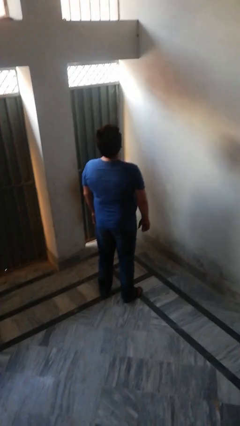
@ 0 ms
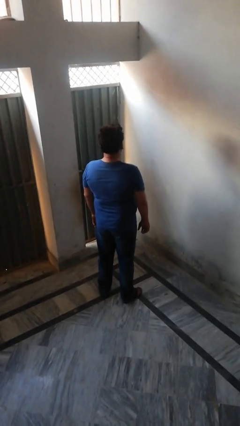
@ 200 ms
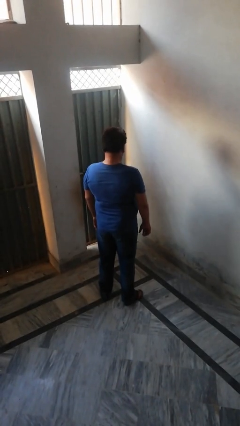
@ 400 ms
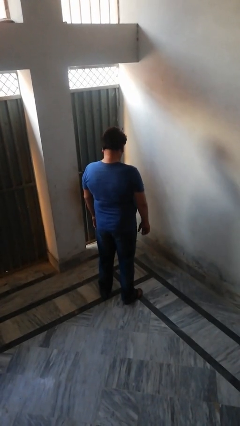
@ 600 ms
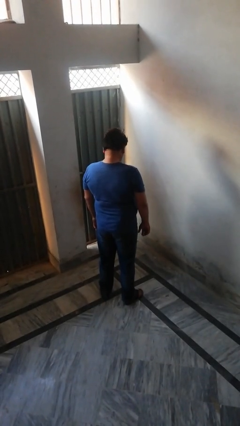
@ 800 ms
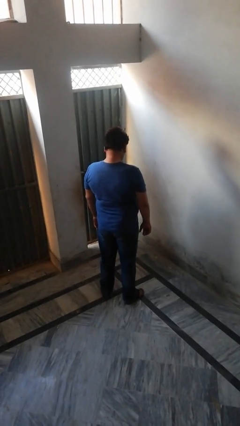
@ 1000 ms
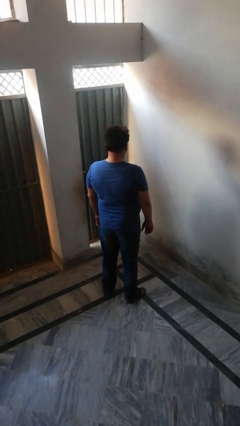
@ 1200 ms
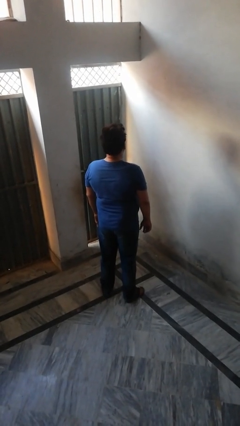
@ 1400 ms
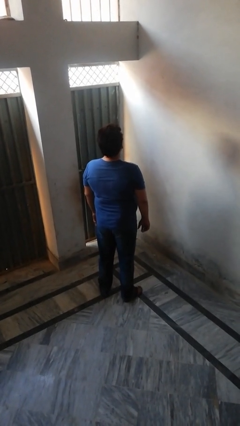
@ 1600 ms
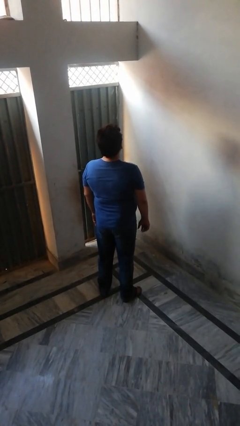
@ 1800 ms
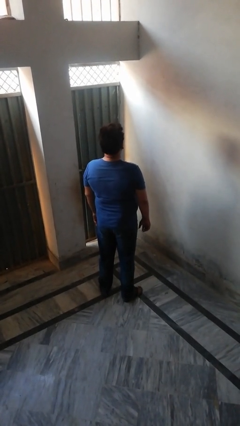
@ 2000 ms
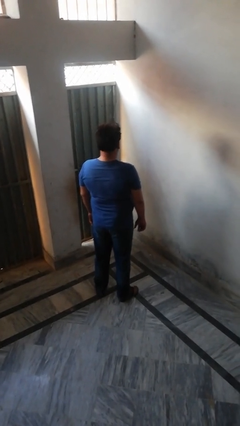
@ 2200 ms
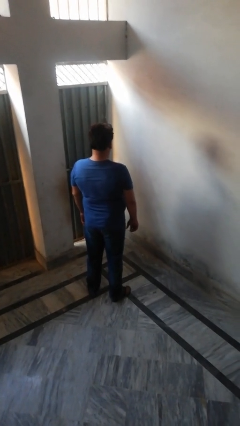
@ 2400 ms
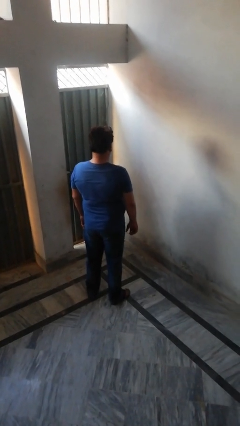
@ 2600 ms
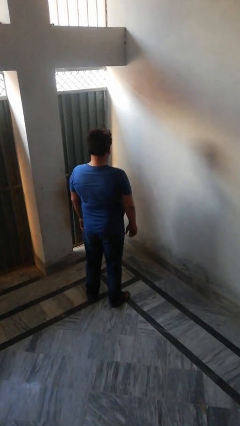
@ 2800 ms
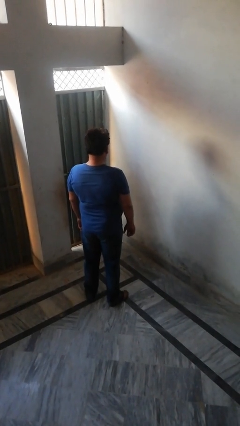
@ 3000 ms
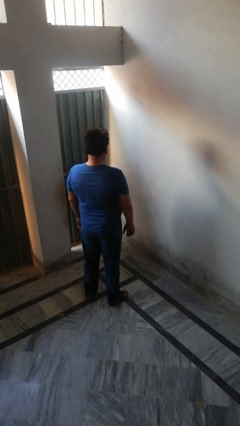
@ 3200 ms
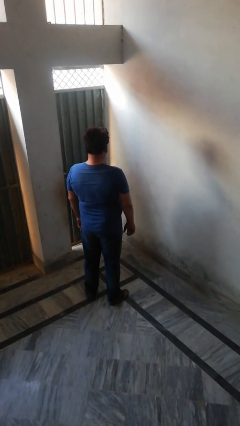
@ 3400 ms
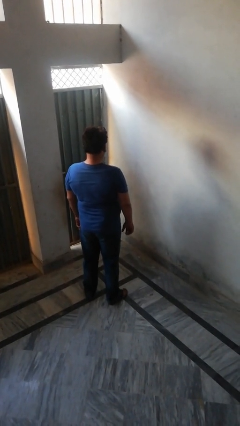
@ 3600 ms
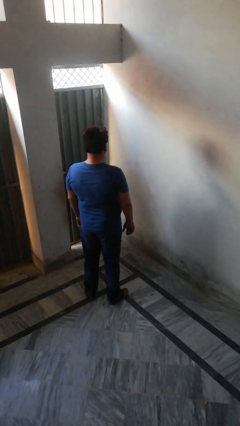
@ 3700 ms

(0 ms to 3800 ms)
person nods head

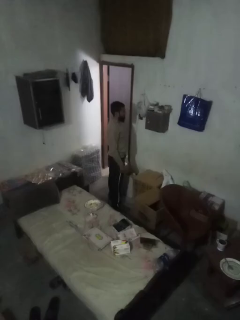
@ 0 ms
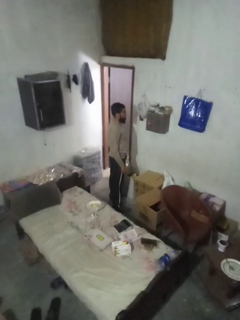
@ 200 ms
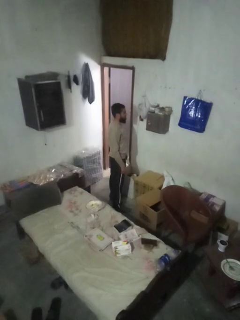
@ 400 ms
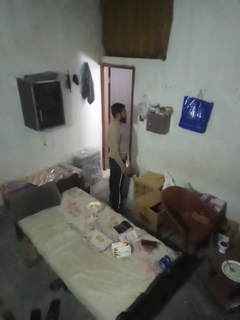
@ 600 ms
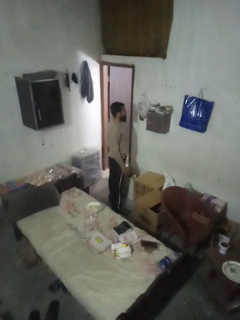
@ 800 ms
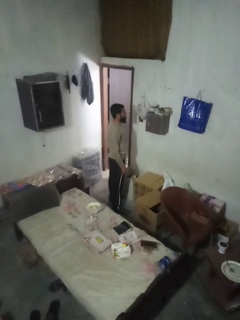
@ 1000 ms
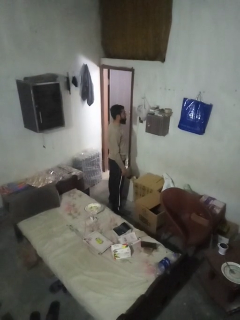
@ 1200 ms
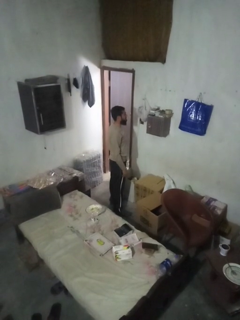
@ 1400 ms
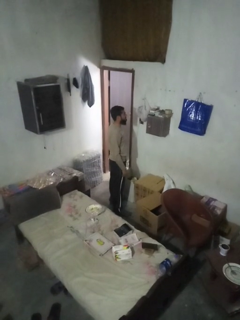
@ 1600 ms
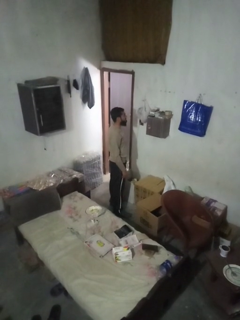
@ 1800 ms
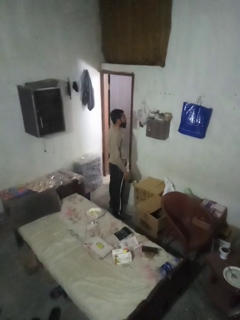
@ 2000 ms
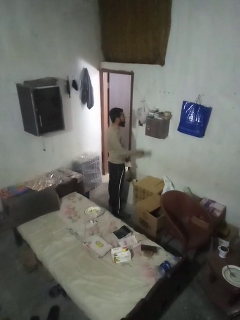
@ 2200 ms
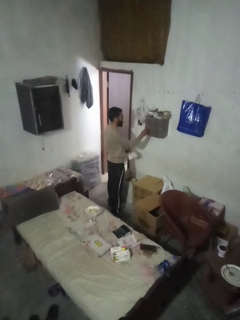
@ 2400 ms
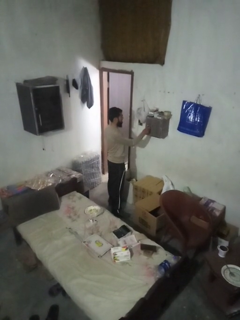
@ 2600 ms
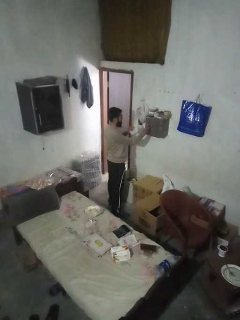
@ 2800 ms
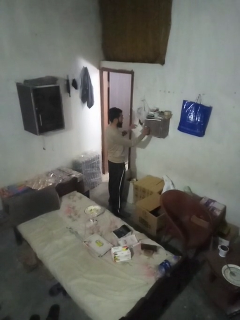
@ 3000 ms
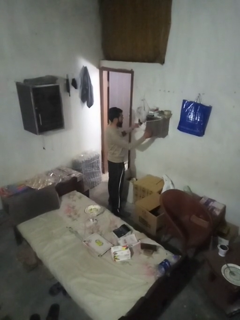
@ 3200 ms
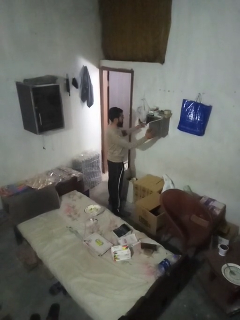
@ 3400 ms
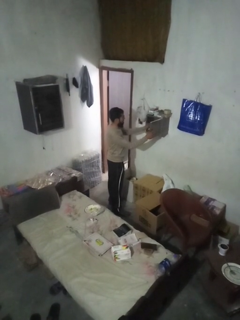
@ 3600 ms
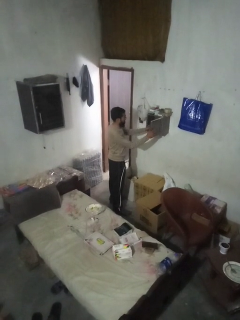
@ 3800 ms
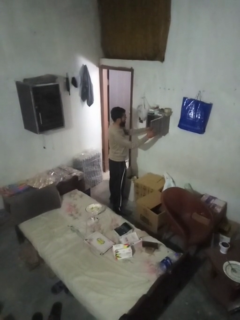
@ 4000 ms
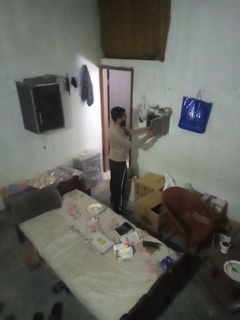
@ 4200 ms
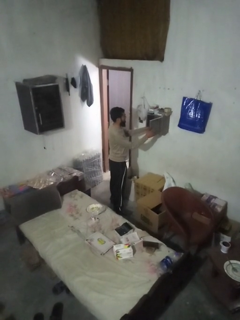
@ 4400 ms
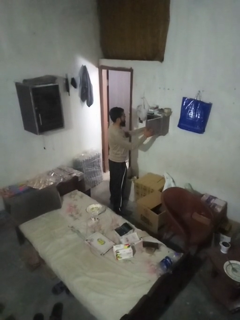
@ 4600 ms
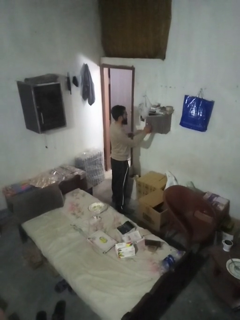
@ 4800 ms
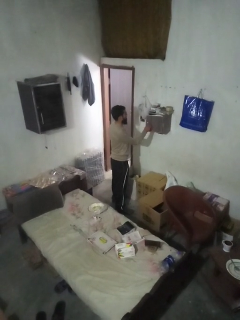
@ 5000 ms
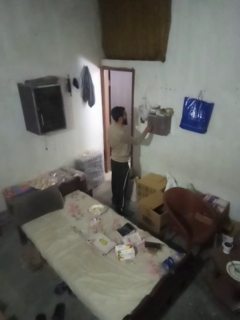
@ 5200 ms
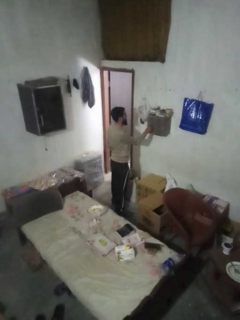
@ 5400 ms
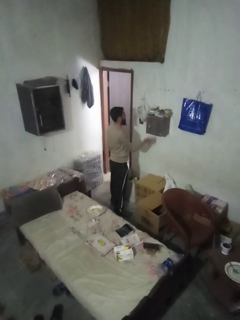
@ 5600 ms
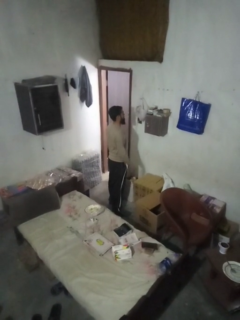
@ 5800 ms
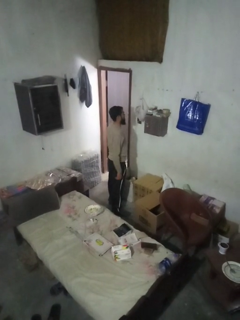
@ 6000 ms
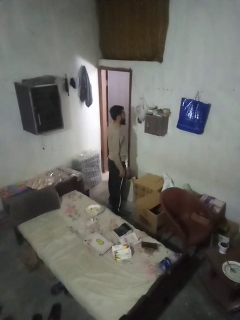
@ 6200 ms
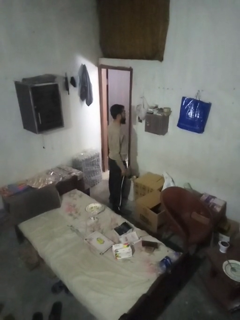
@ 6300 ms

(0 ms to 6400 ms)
person puts letters in mailbox

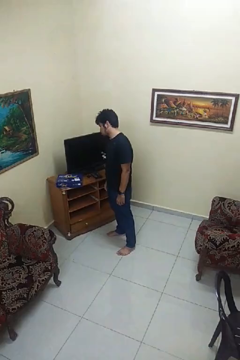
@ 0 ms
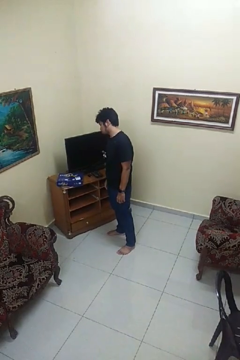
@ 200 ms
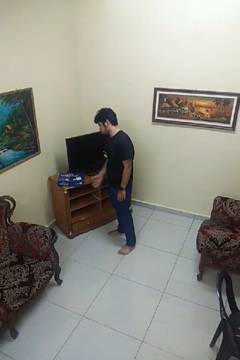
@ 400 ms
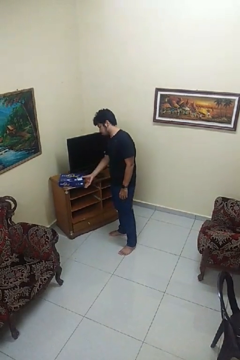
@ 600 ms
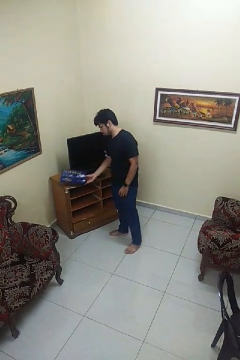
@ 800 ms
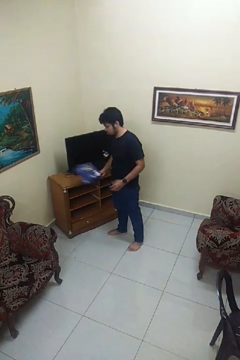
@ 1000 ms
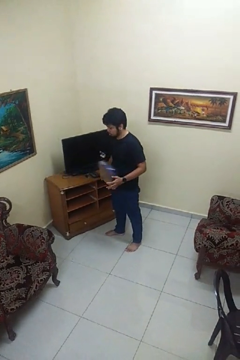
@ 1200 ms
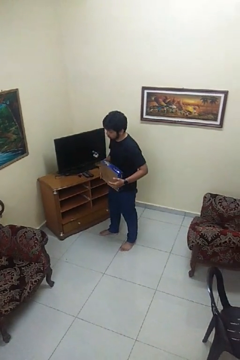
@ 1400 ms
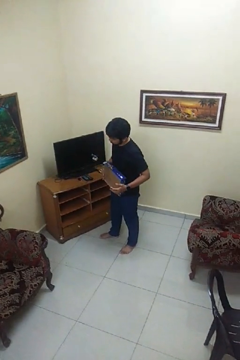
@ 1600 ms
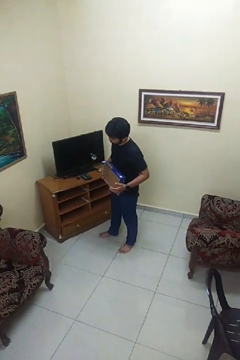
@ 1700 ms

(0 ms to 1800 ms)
person picks up object from countertop

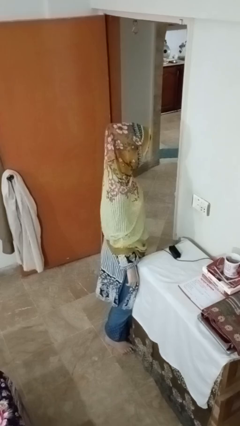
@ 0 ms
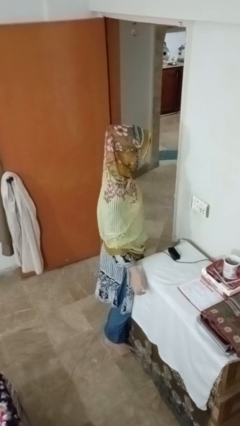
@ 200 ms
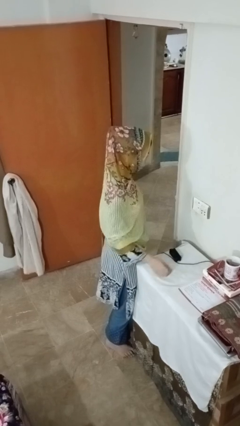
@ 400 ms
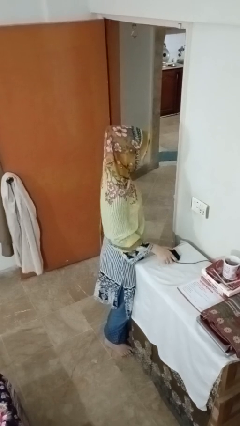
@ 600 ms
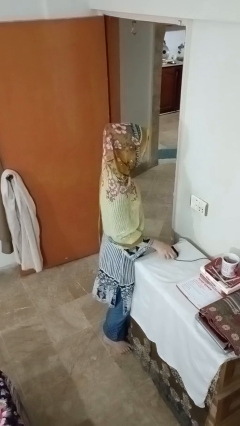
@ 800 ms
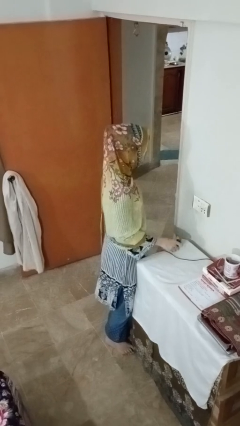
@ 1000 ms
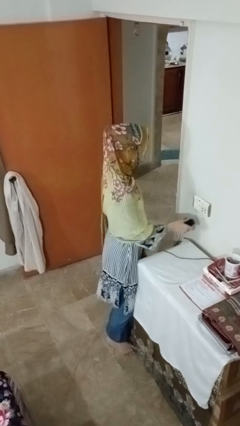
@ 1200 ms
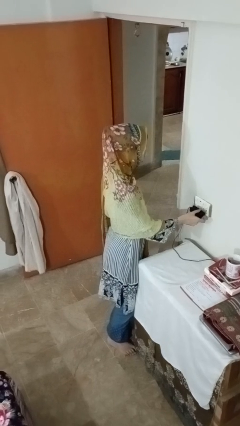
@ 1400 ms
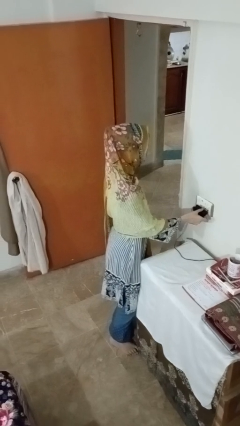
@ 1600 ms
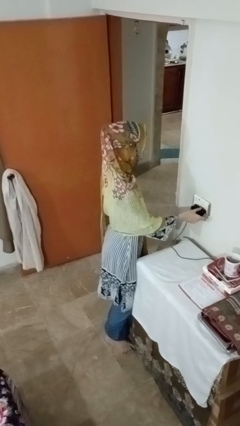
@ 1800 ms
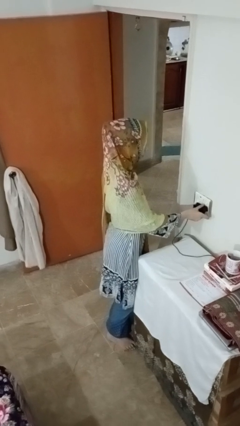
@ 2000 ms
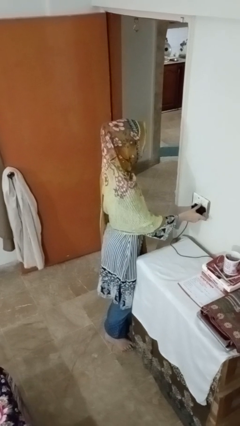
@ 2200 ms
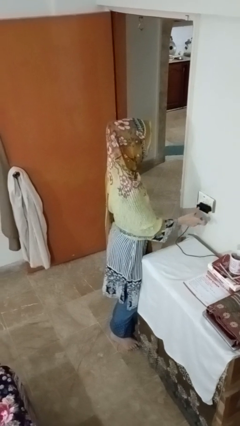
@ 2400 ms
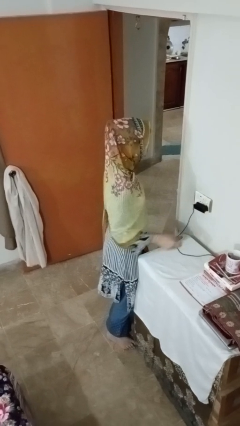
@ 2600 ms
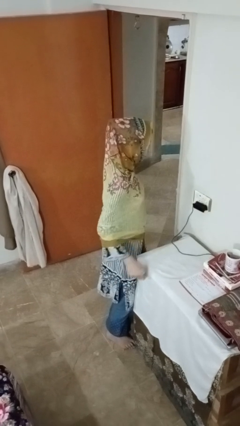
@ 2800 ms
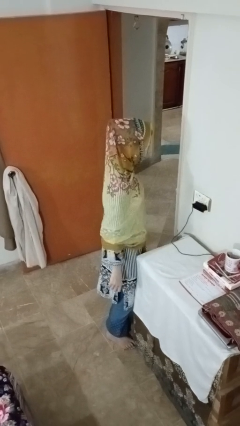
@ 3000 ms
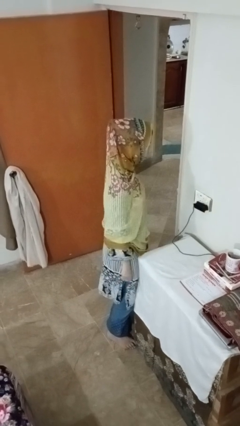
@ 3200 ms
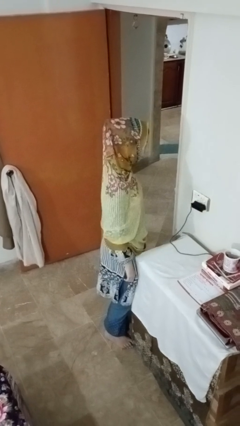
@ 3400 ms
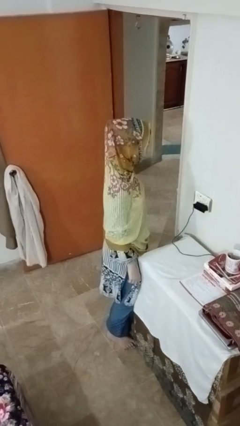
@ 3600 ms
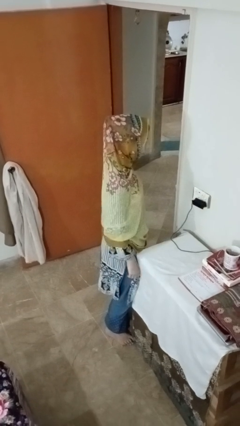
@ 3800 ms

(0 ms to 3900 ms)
person plugs into electrical socket

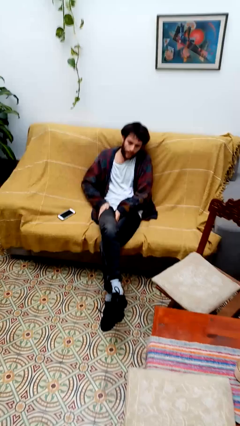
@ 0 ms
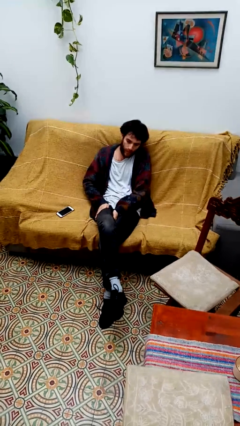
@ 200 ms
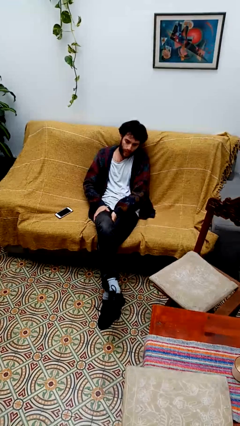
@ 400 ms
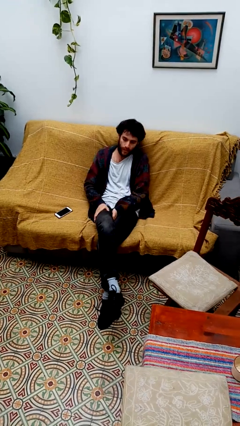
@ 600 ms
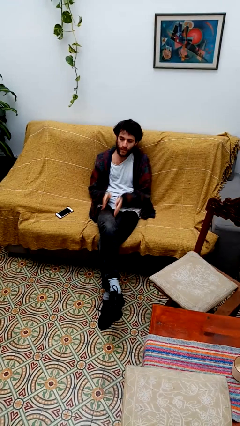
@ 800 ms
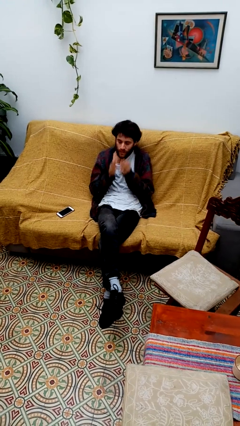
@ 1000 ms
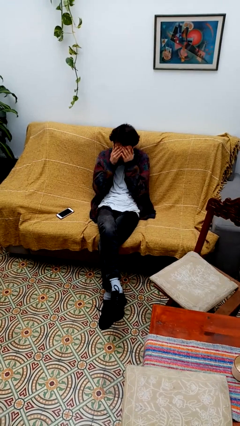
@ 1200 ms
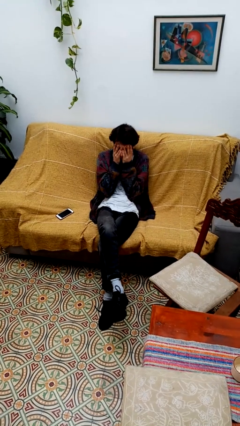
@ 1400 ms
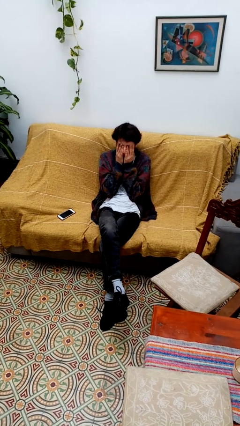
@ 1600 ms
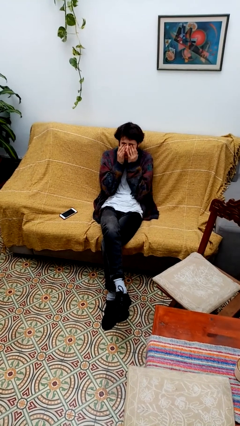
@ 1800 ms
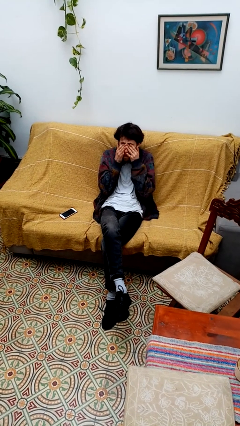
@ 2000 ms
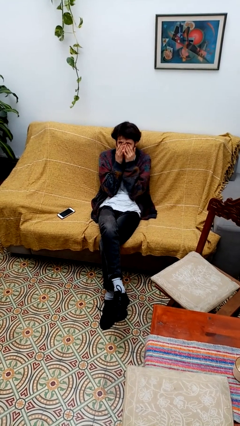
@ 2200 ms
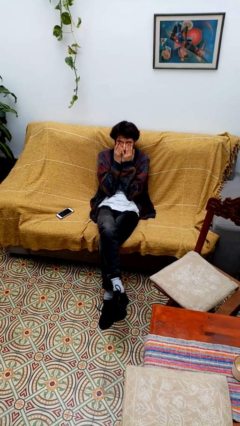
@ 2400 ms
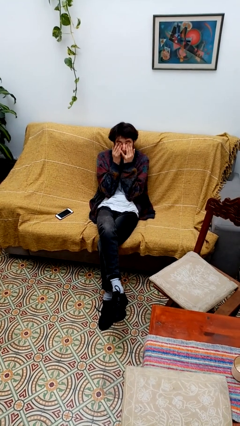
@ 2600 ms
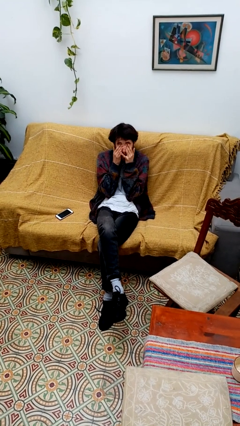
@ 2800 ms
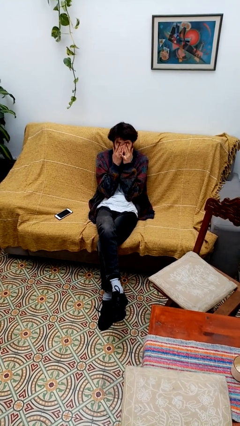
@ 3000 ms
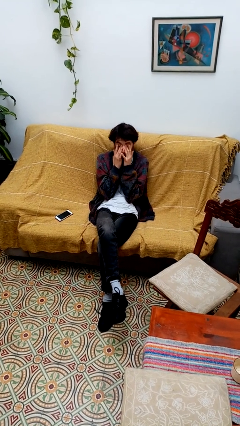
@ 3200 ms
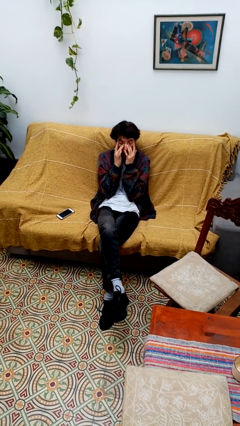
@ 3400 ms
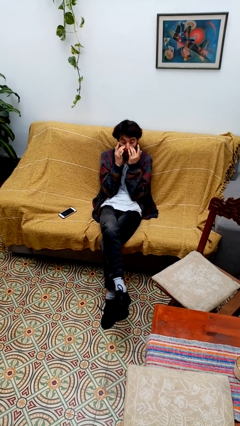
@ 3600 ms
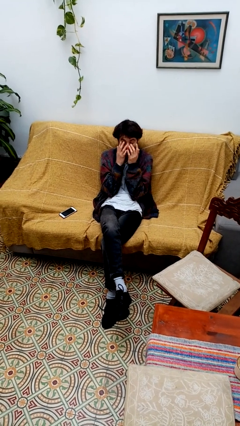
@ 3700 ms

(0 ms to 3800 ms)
person rubs eyes

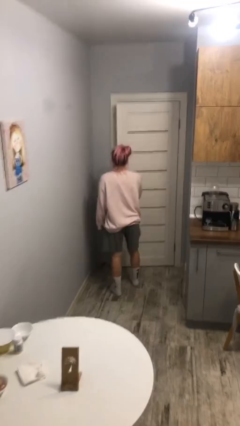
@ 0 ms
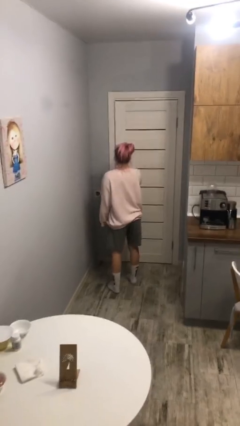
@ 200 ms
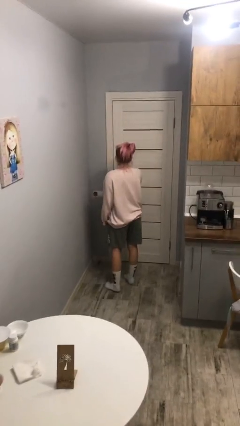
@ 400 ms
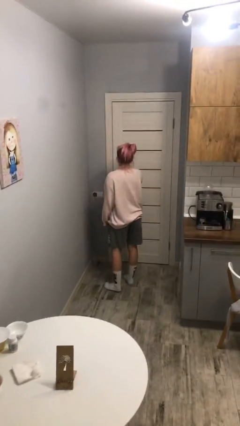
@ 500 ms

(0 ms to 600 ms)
person closes facility door
